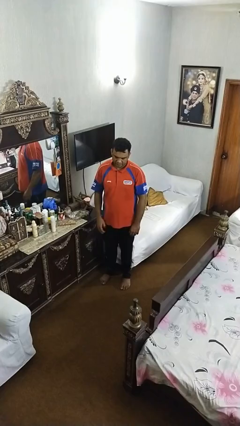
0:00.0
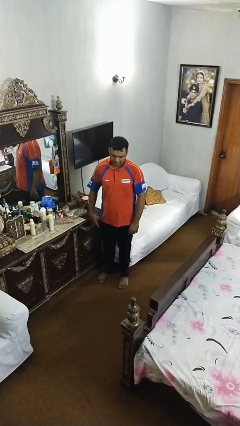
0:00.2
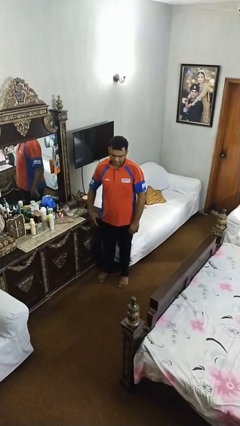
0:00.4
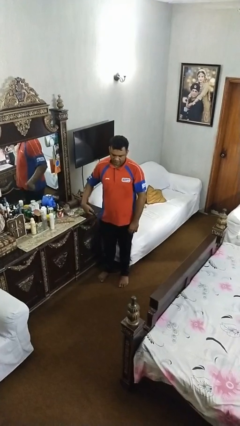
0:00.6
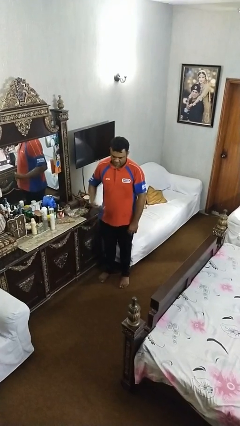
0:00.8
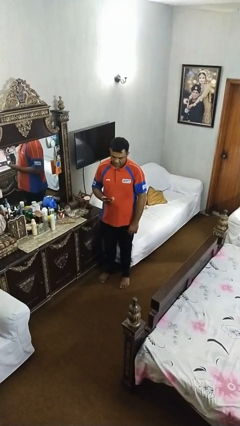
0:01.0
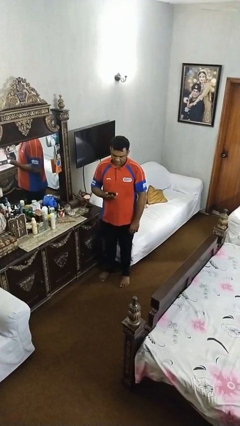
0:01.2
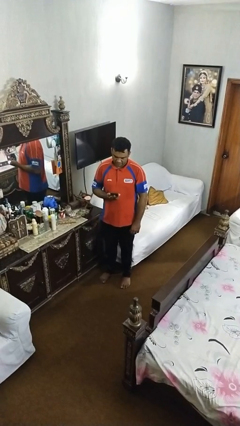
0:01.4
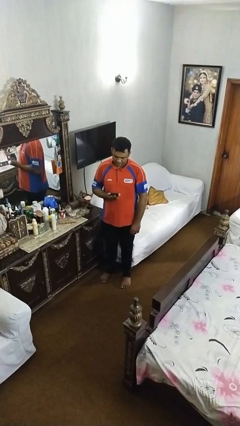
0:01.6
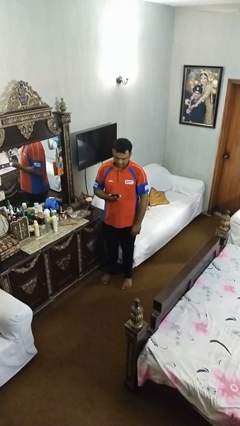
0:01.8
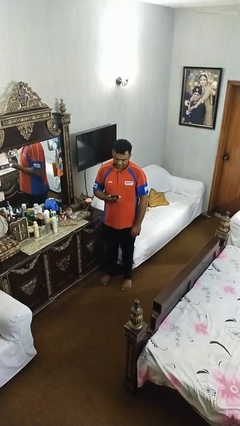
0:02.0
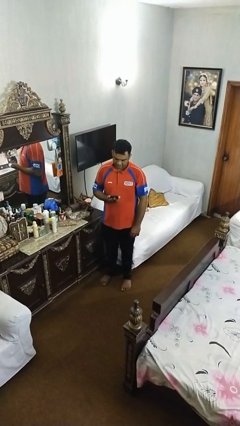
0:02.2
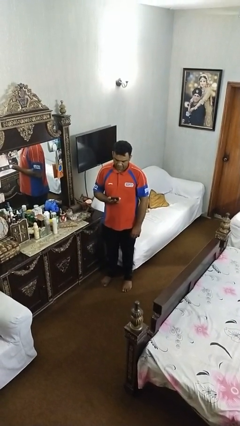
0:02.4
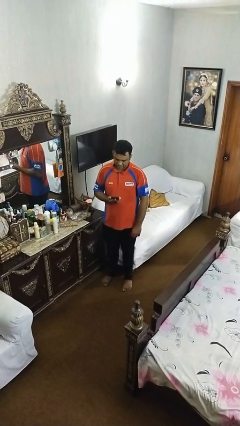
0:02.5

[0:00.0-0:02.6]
person takes phone from pocket

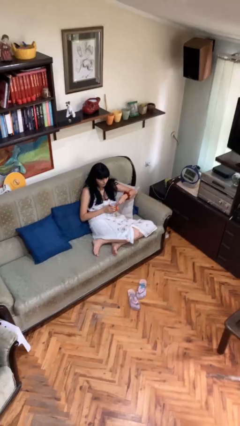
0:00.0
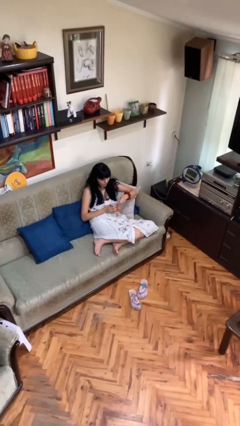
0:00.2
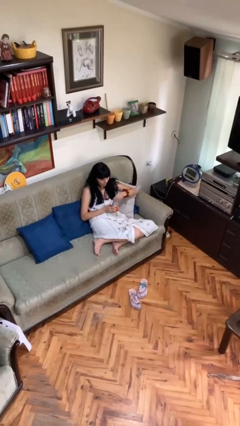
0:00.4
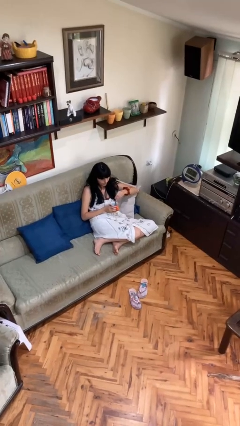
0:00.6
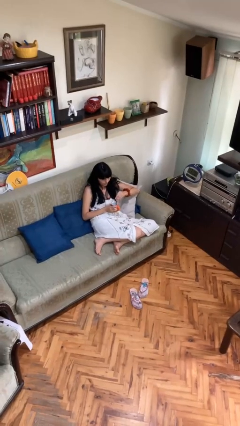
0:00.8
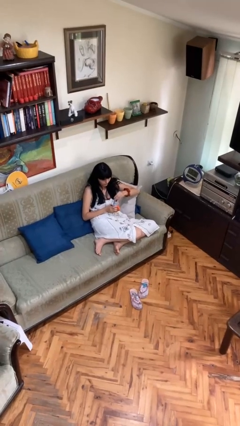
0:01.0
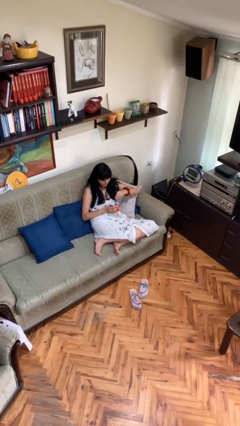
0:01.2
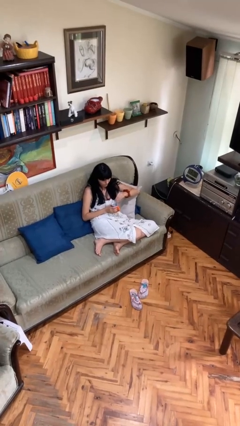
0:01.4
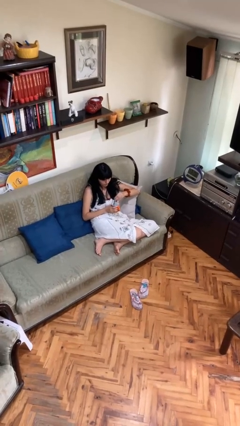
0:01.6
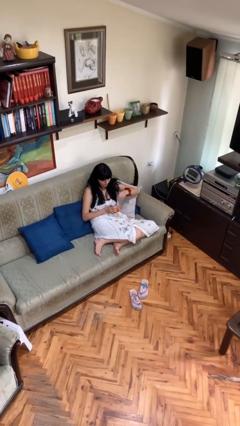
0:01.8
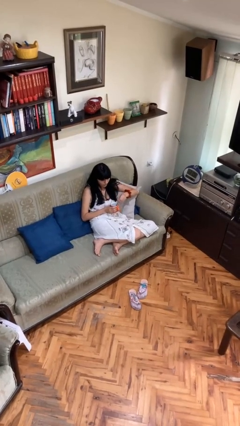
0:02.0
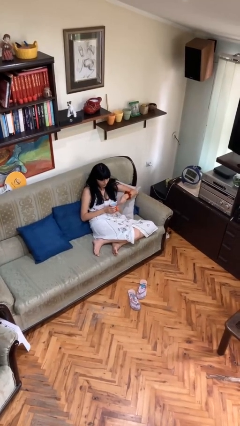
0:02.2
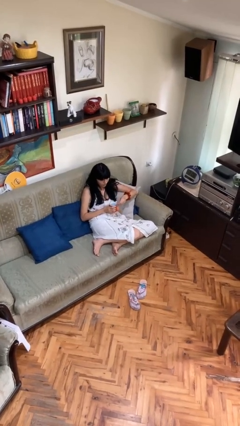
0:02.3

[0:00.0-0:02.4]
person stirs mug

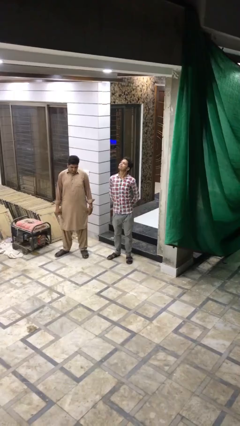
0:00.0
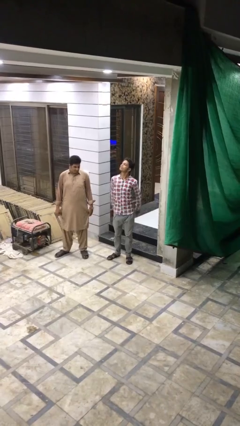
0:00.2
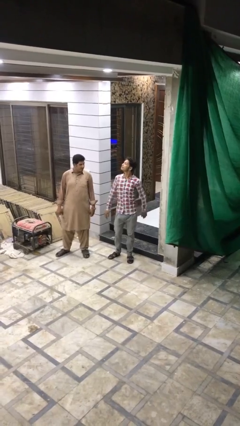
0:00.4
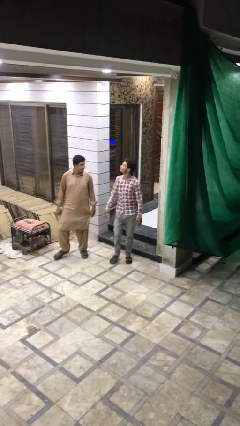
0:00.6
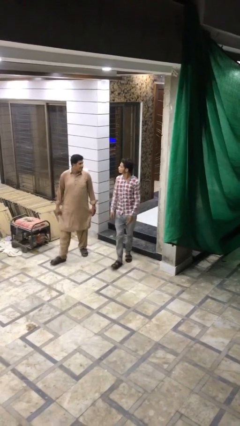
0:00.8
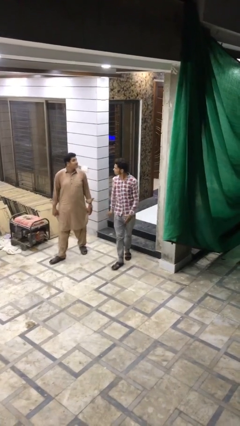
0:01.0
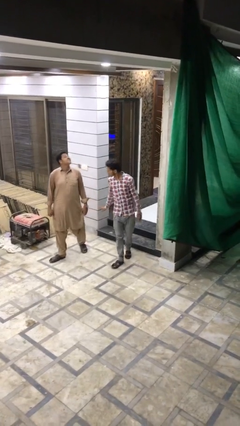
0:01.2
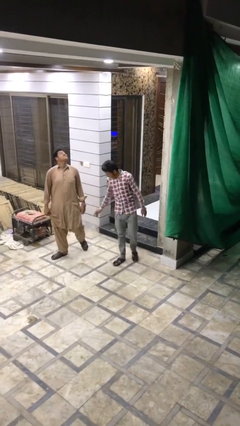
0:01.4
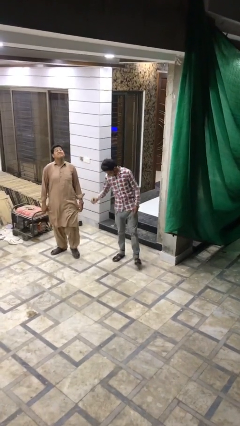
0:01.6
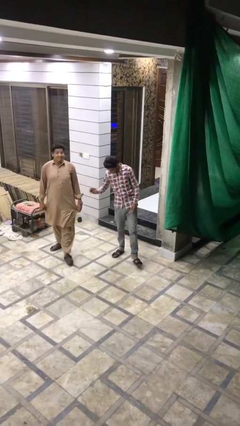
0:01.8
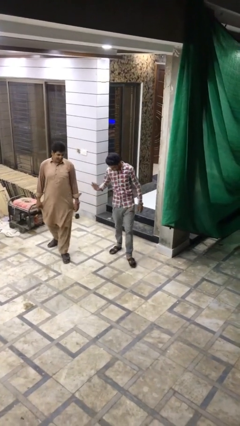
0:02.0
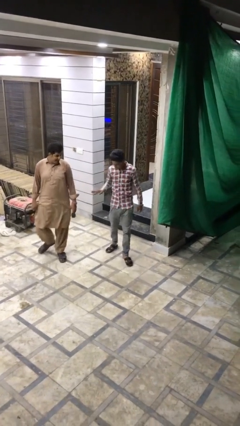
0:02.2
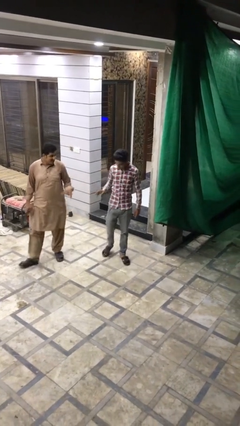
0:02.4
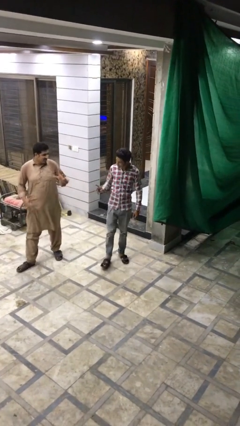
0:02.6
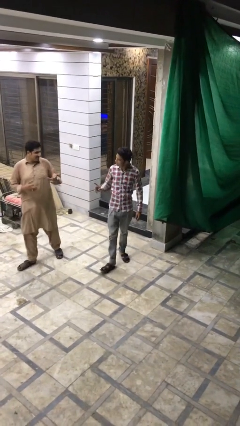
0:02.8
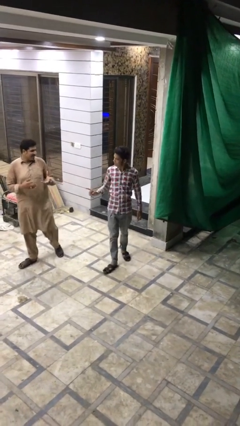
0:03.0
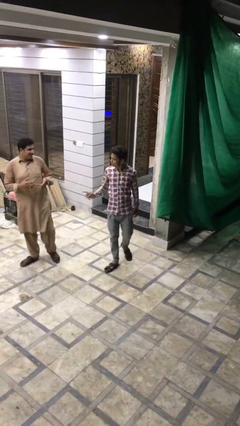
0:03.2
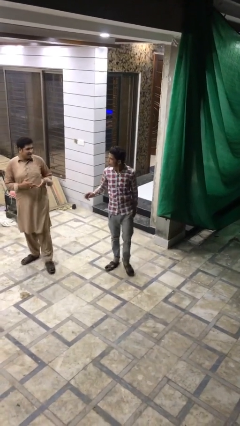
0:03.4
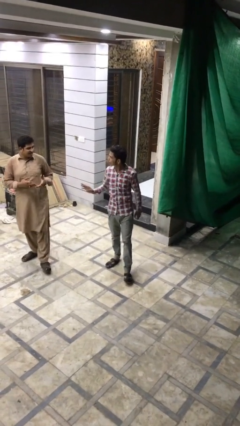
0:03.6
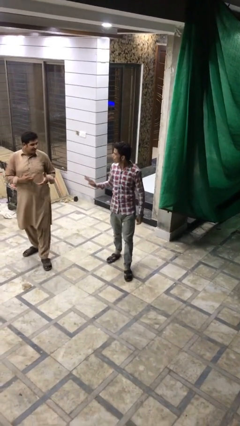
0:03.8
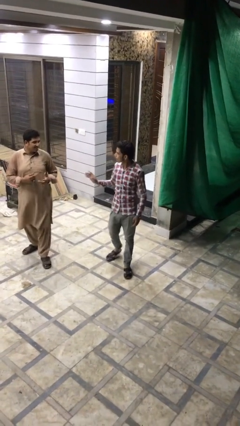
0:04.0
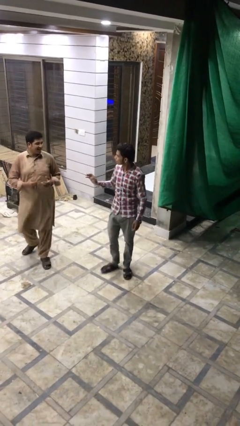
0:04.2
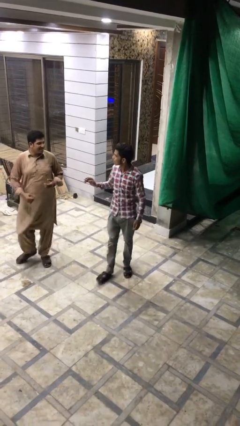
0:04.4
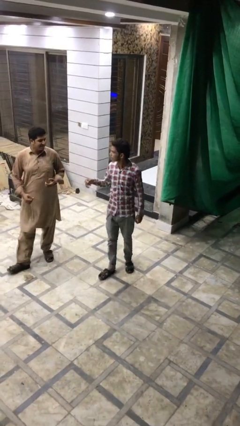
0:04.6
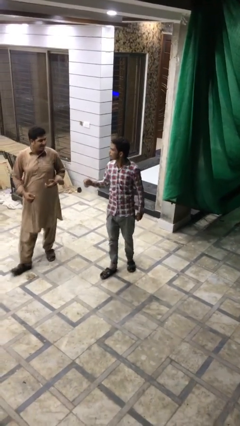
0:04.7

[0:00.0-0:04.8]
person talks to person

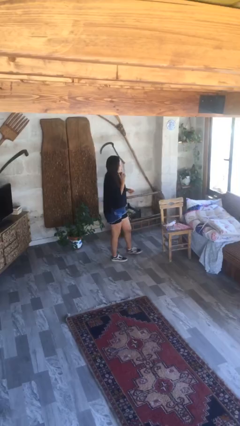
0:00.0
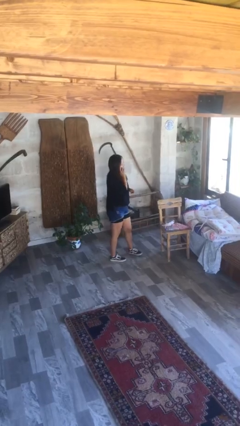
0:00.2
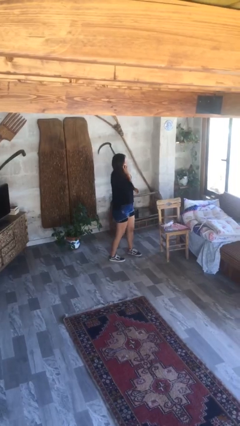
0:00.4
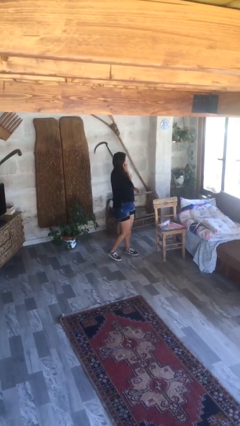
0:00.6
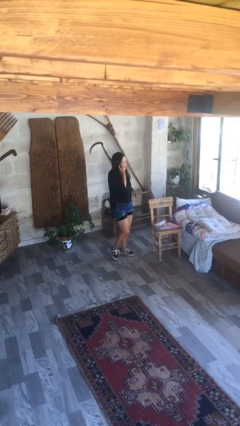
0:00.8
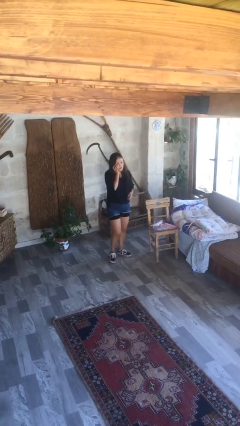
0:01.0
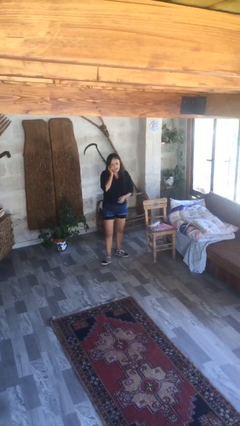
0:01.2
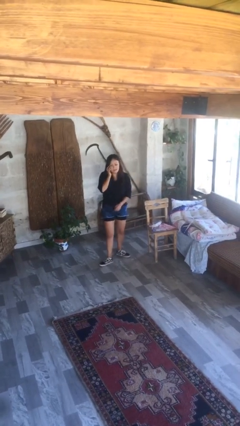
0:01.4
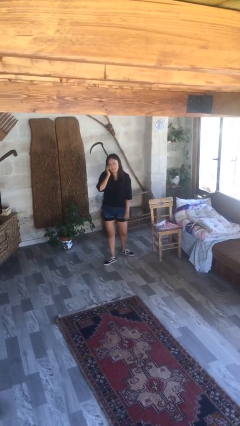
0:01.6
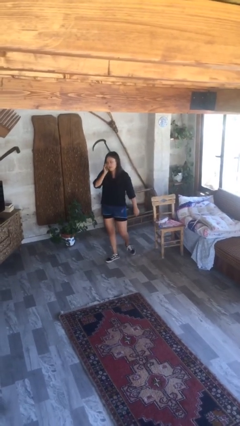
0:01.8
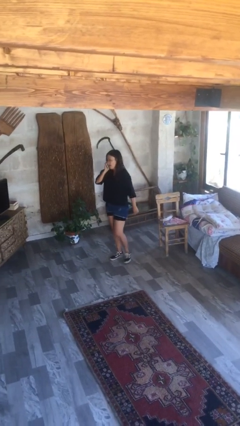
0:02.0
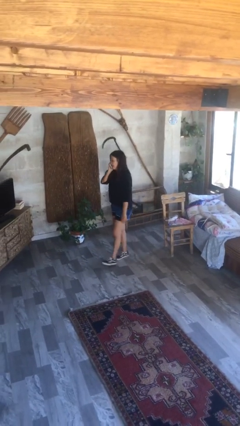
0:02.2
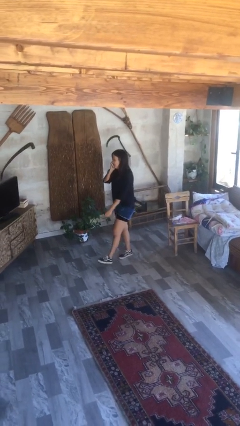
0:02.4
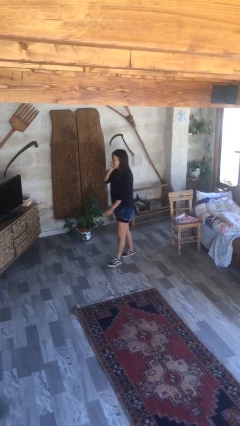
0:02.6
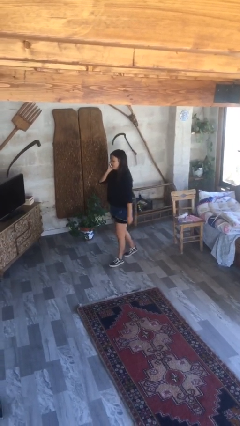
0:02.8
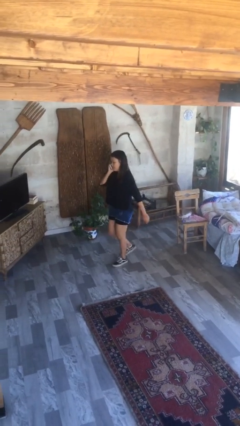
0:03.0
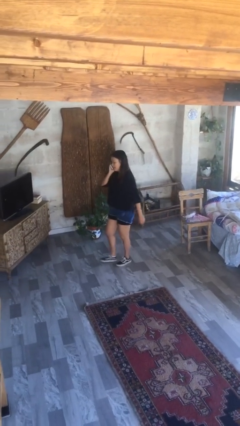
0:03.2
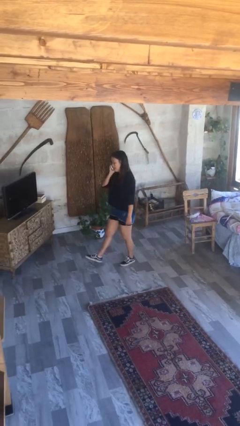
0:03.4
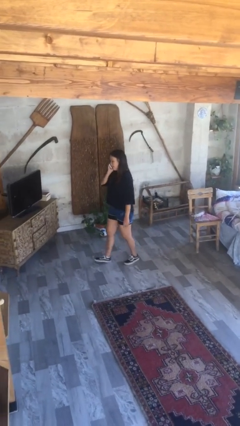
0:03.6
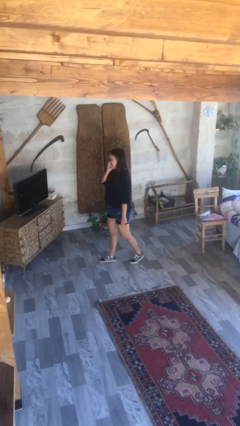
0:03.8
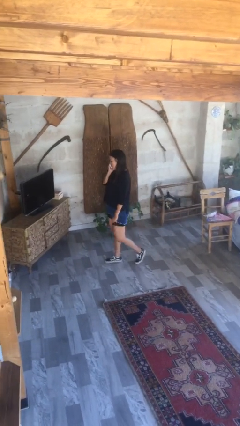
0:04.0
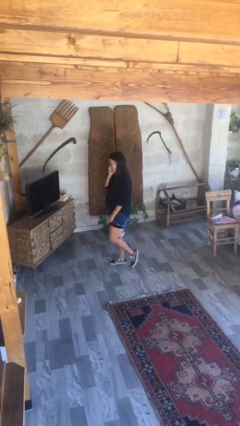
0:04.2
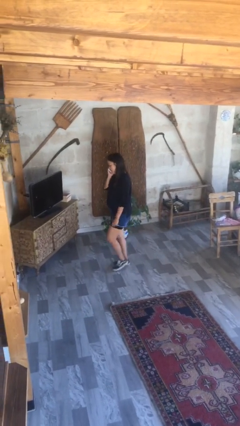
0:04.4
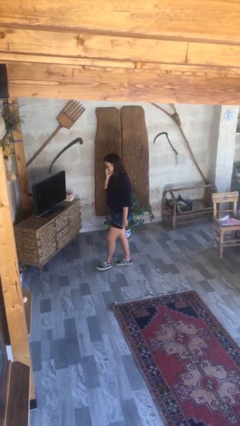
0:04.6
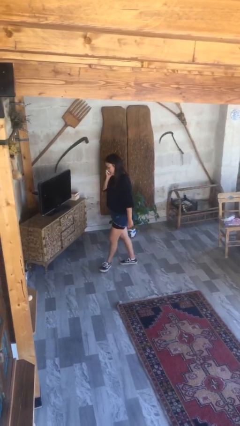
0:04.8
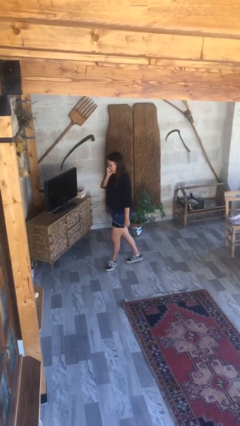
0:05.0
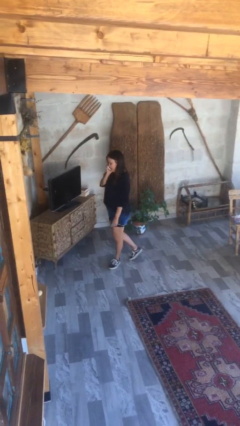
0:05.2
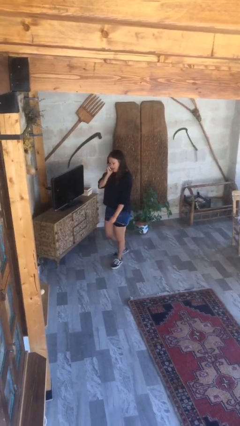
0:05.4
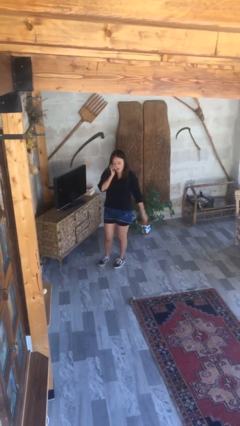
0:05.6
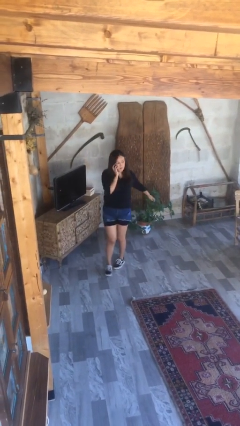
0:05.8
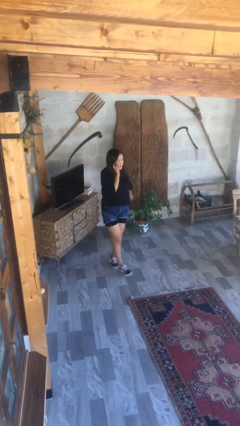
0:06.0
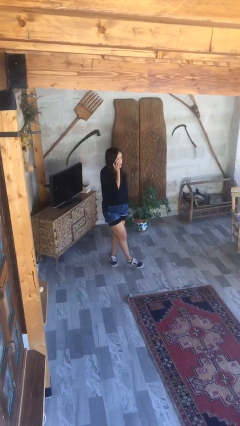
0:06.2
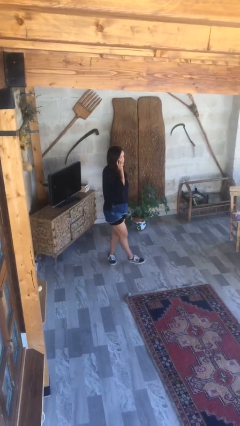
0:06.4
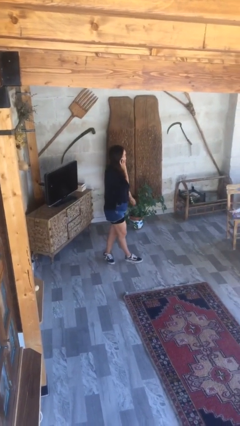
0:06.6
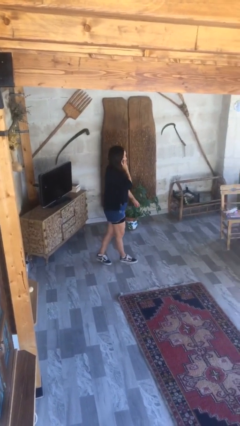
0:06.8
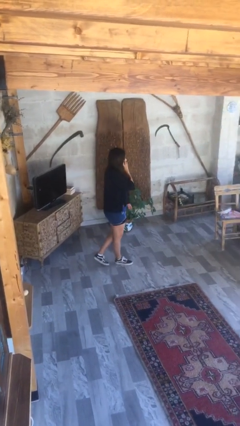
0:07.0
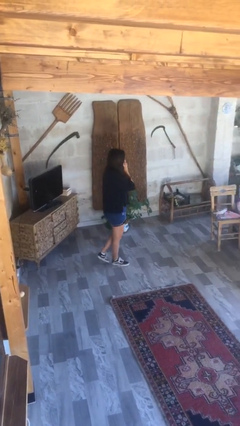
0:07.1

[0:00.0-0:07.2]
person talks on phone

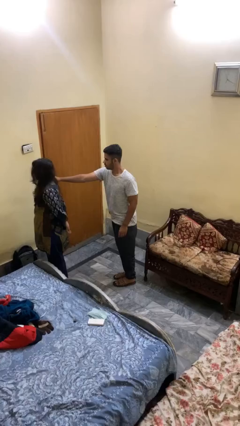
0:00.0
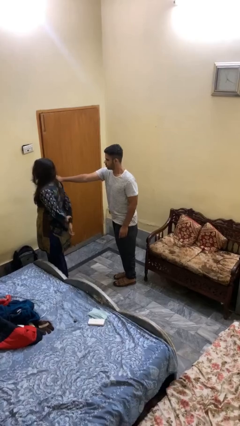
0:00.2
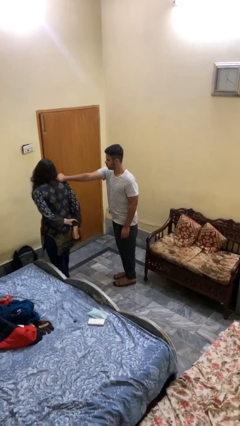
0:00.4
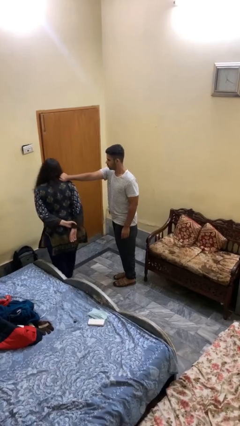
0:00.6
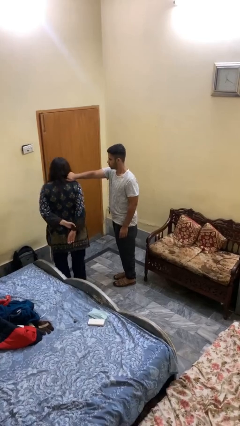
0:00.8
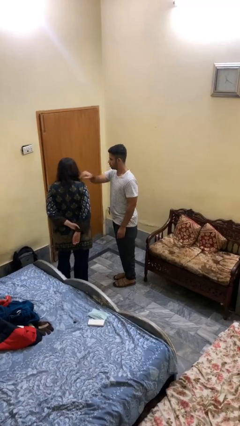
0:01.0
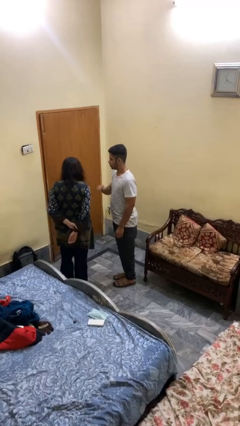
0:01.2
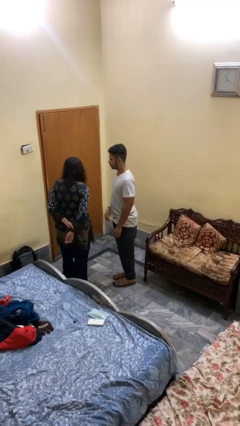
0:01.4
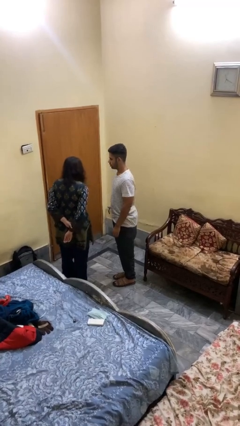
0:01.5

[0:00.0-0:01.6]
person spins person around
